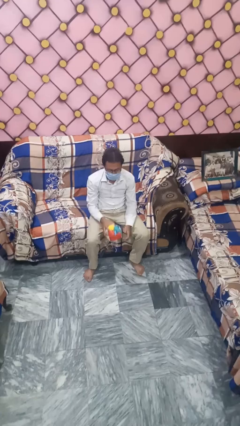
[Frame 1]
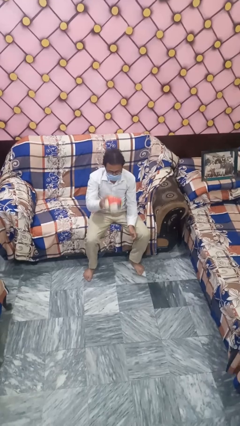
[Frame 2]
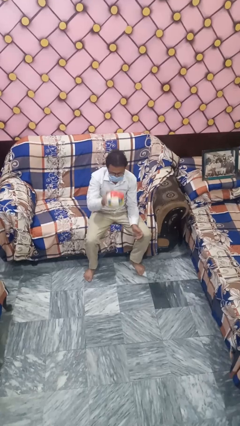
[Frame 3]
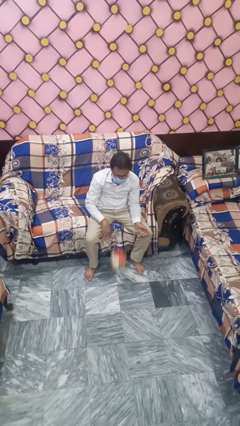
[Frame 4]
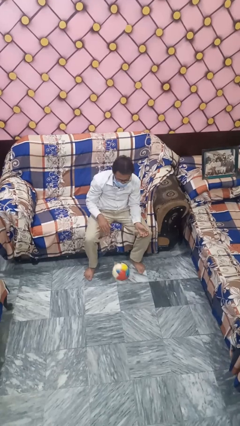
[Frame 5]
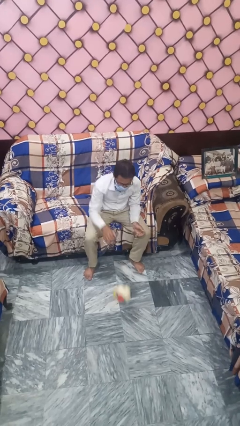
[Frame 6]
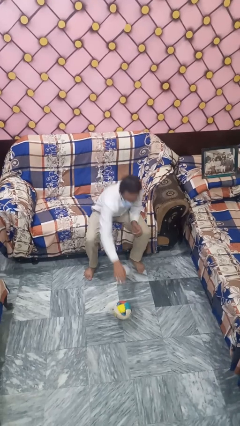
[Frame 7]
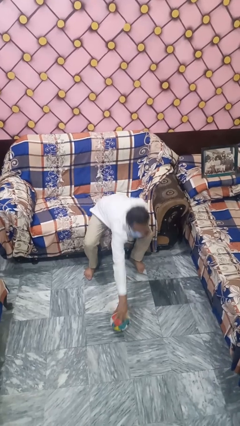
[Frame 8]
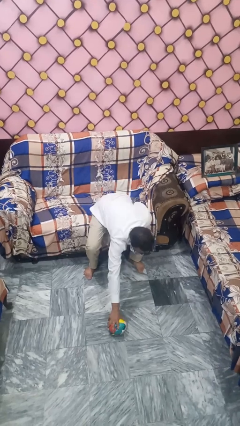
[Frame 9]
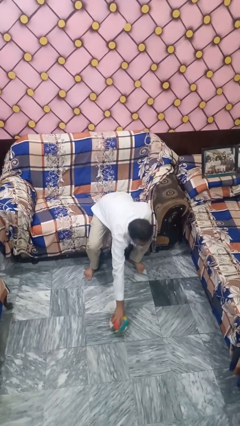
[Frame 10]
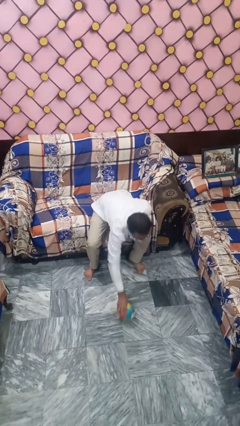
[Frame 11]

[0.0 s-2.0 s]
person bounces ball on floor

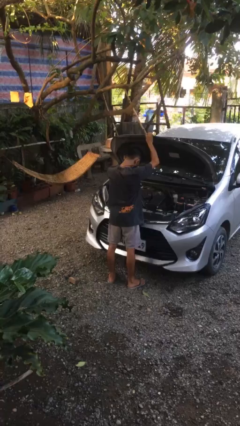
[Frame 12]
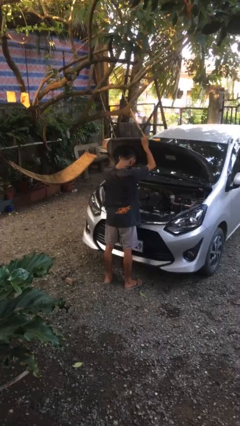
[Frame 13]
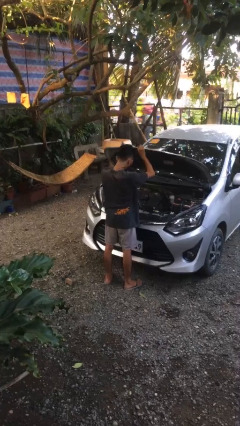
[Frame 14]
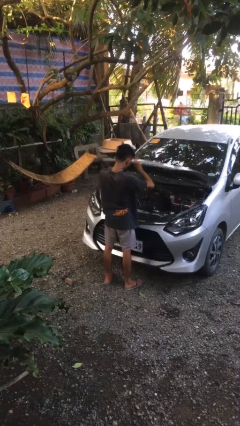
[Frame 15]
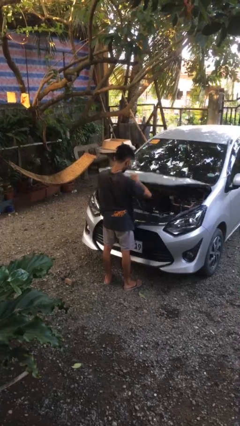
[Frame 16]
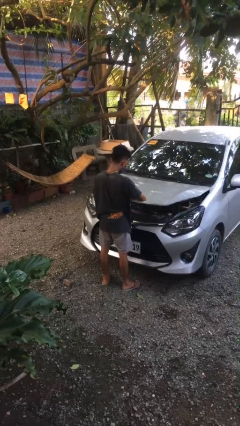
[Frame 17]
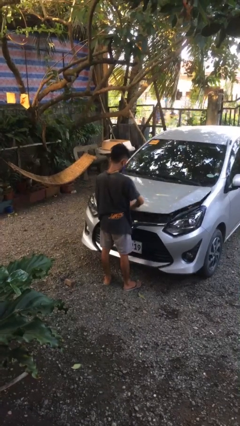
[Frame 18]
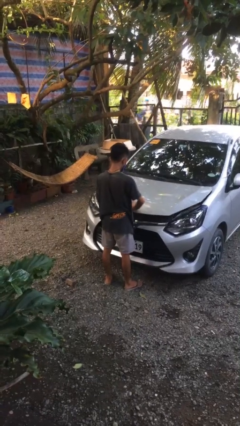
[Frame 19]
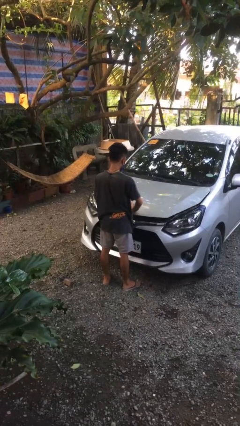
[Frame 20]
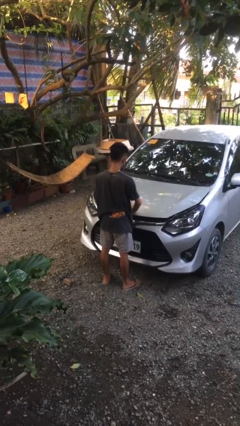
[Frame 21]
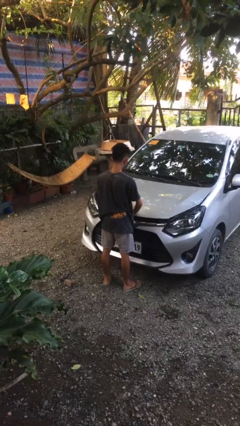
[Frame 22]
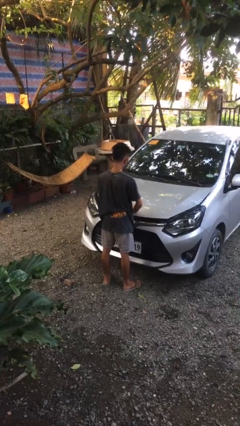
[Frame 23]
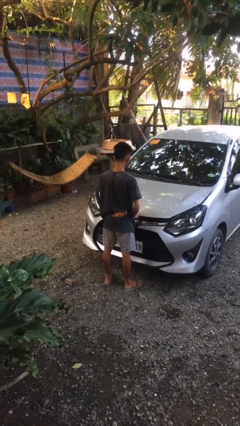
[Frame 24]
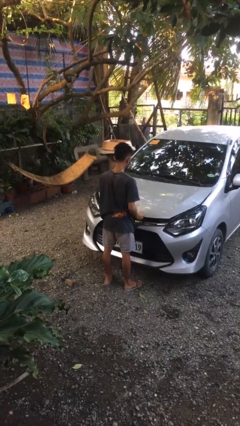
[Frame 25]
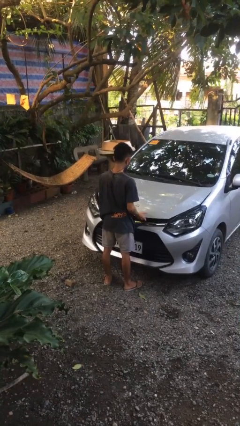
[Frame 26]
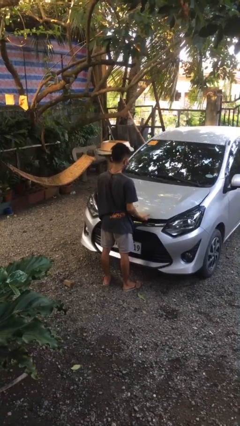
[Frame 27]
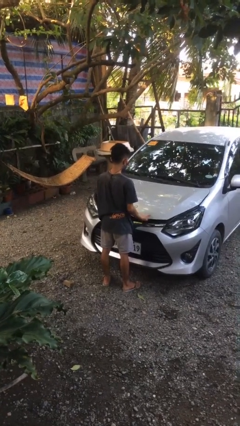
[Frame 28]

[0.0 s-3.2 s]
person closes car hood

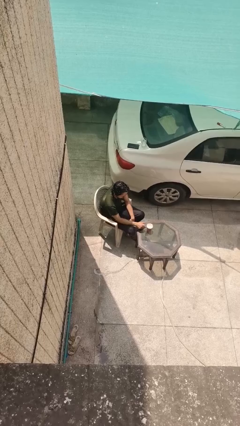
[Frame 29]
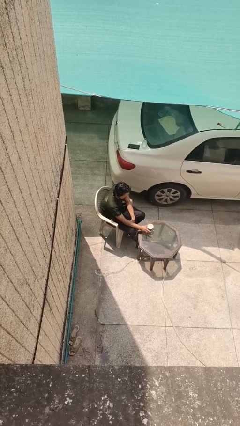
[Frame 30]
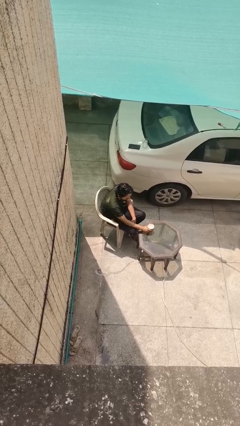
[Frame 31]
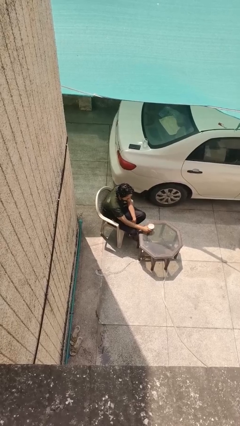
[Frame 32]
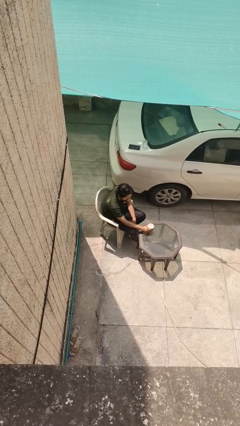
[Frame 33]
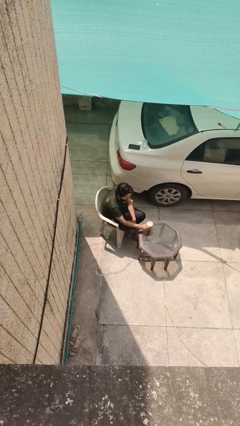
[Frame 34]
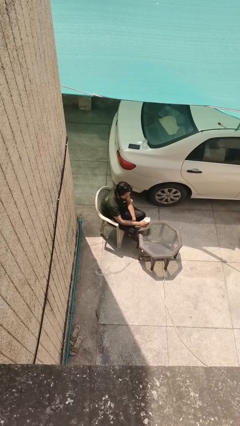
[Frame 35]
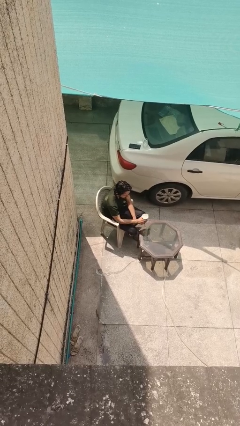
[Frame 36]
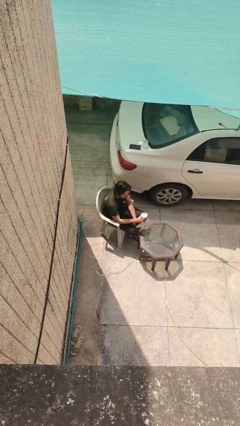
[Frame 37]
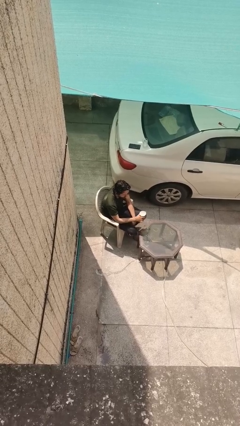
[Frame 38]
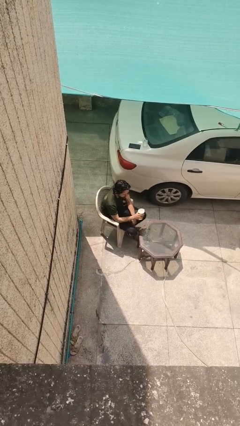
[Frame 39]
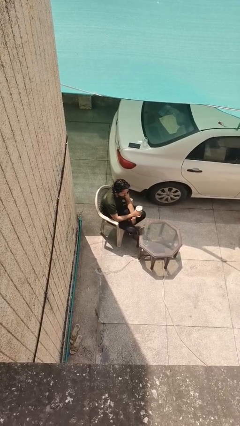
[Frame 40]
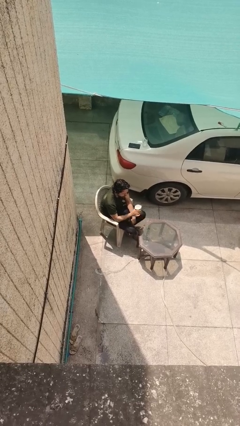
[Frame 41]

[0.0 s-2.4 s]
person picks up object from table

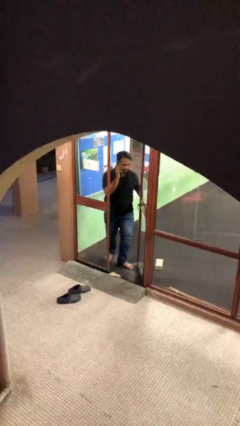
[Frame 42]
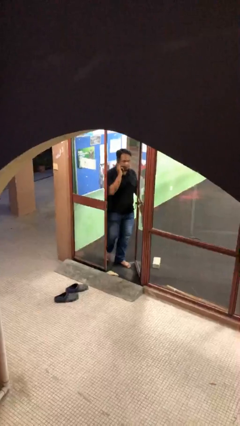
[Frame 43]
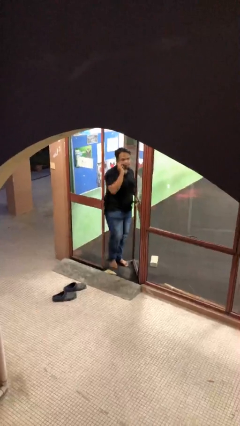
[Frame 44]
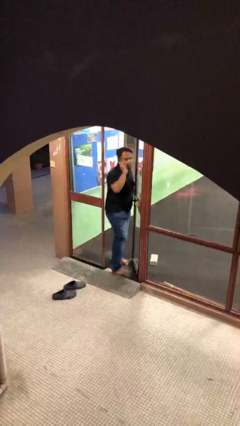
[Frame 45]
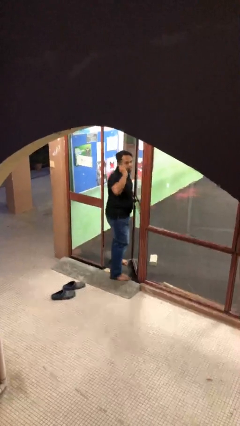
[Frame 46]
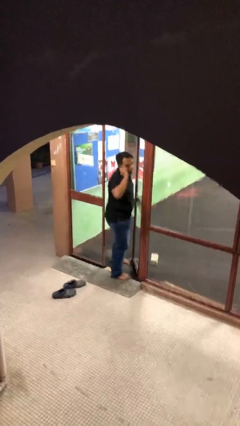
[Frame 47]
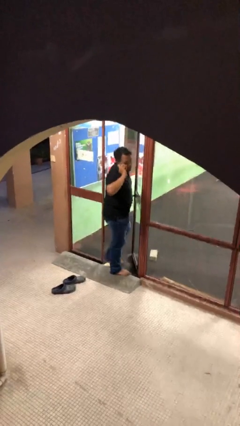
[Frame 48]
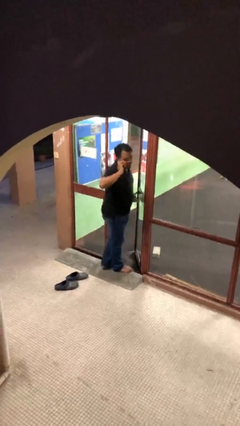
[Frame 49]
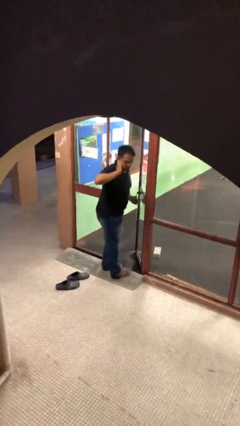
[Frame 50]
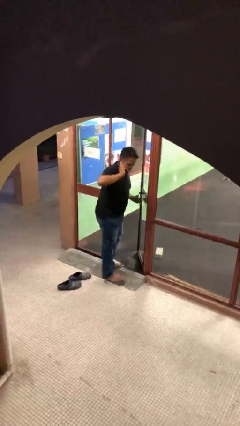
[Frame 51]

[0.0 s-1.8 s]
person enters scene through structure

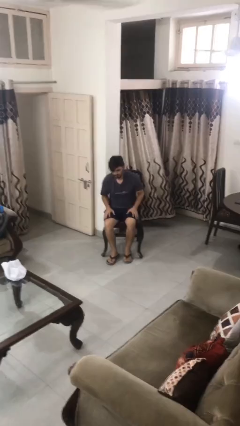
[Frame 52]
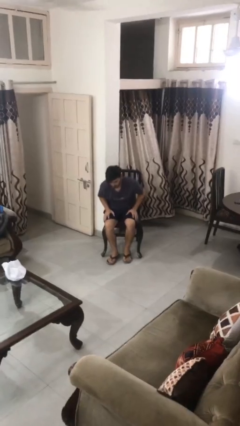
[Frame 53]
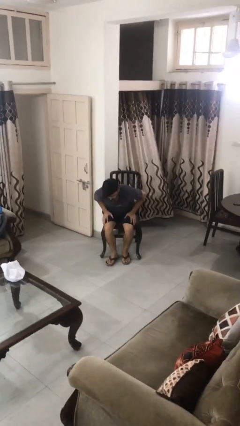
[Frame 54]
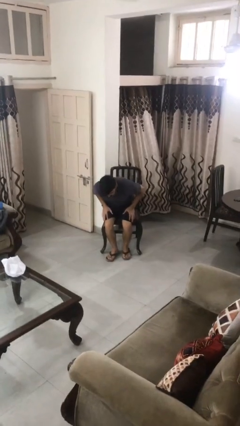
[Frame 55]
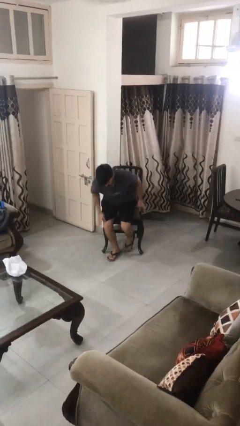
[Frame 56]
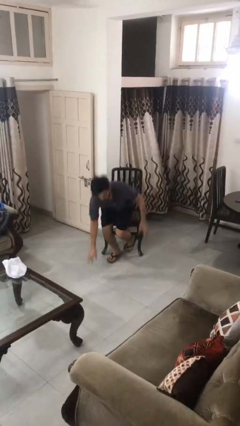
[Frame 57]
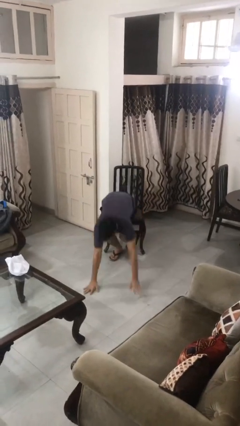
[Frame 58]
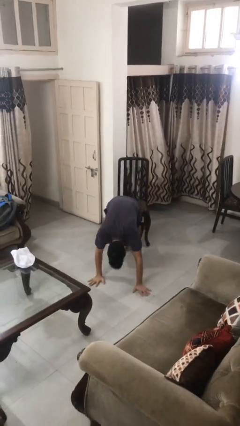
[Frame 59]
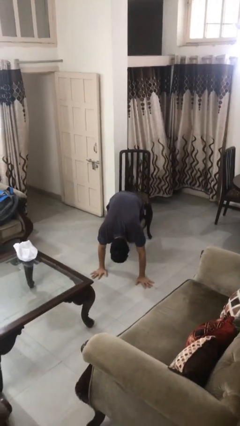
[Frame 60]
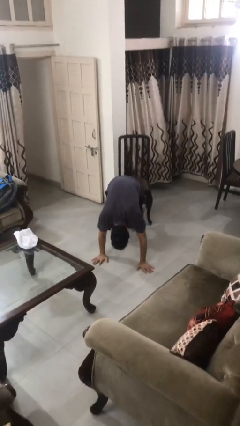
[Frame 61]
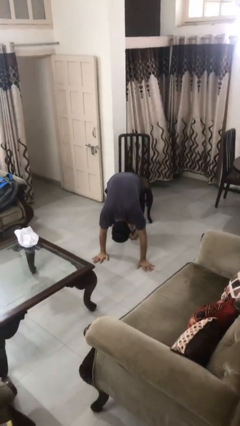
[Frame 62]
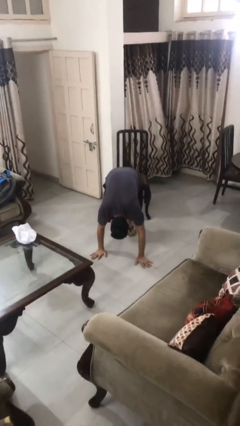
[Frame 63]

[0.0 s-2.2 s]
person falls from chair

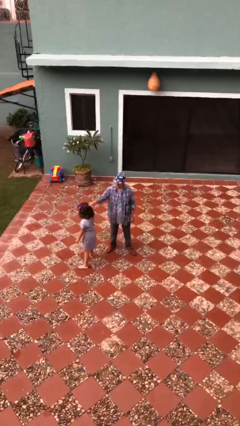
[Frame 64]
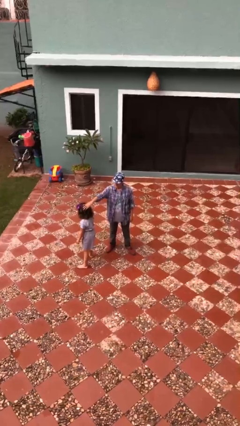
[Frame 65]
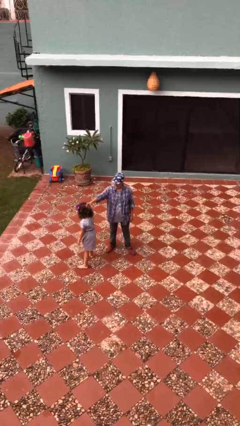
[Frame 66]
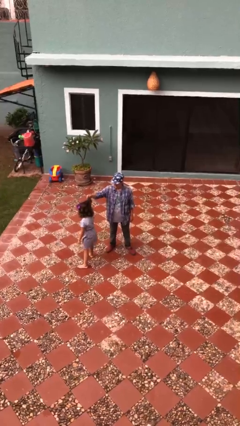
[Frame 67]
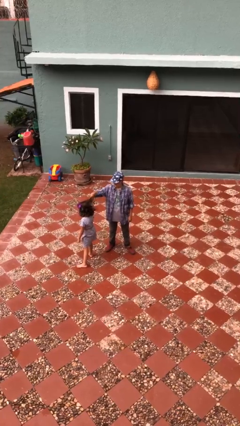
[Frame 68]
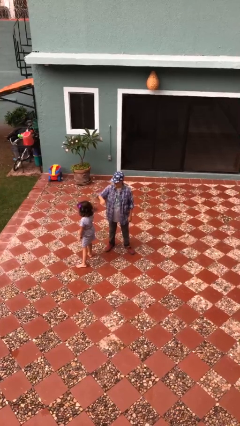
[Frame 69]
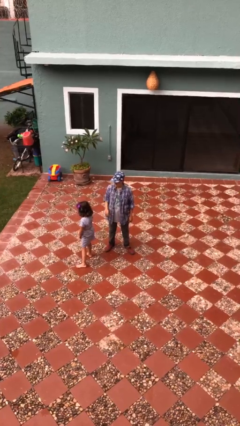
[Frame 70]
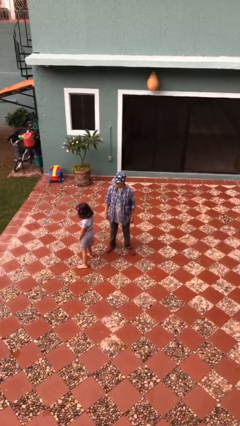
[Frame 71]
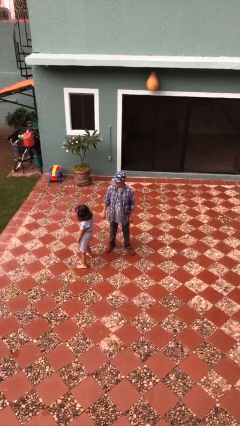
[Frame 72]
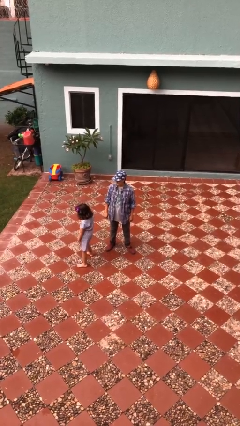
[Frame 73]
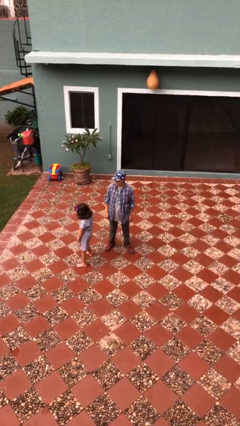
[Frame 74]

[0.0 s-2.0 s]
person grabs person by hair

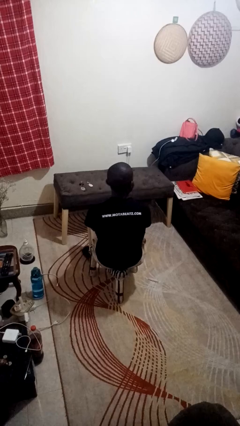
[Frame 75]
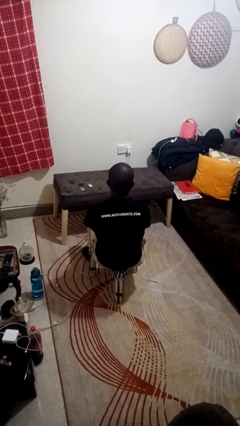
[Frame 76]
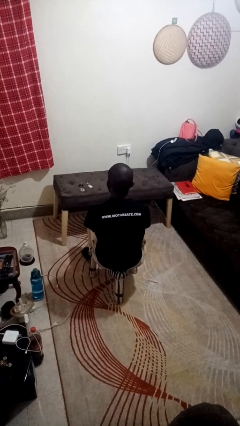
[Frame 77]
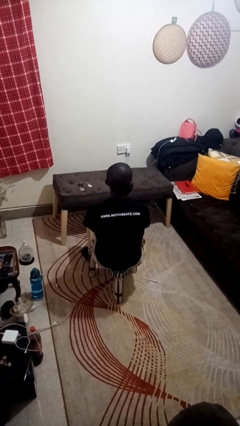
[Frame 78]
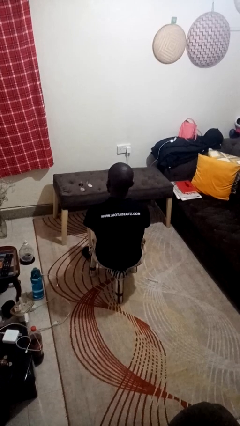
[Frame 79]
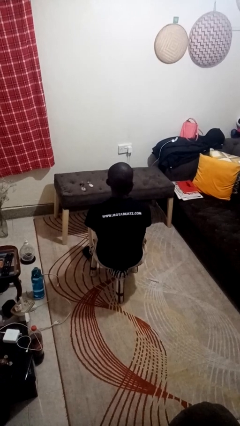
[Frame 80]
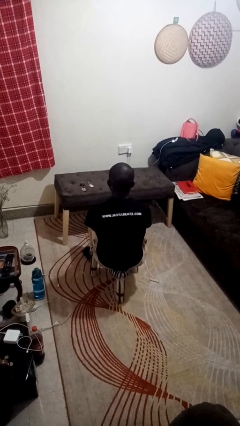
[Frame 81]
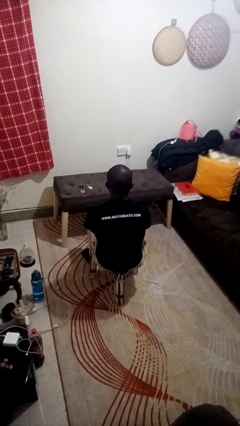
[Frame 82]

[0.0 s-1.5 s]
person shakes head

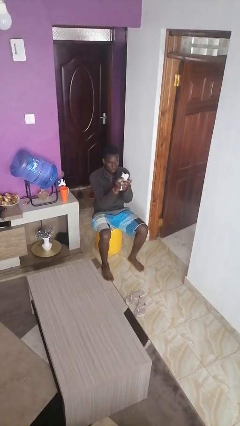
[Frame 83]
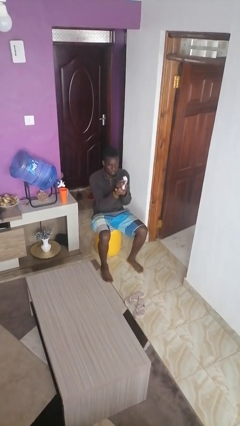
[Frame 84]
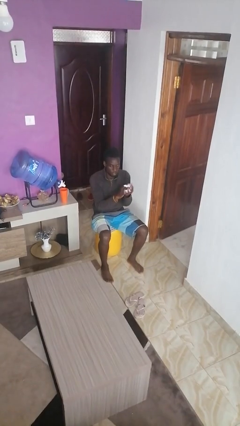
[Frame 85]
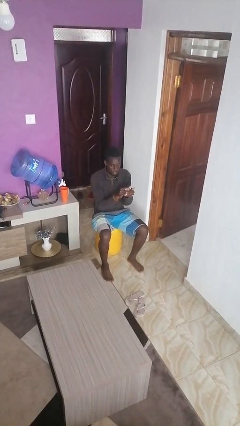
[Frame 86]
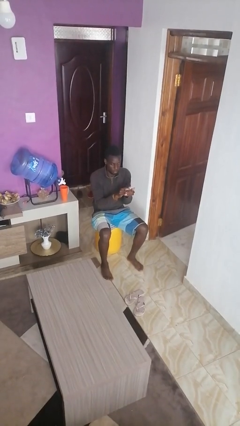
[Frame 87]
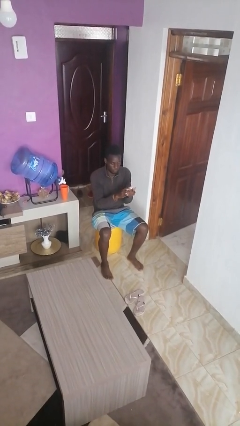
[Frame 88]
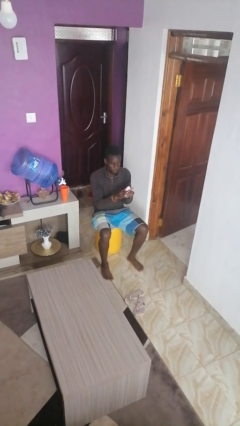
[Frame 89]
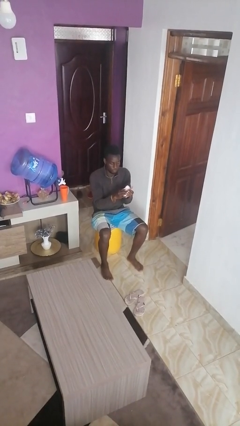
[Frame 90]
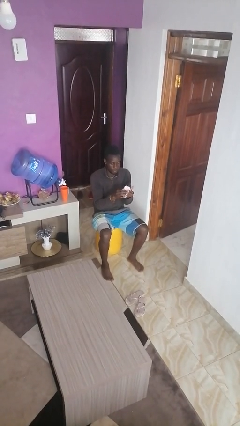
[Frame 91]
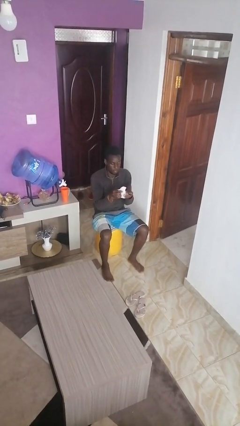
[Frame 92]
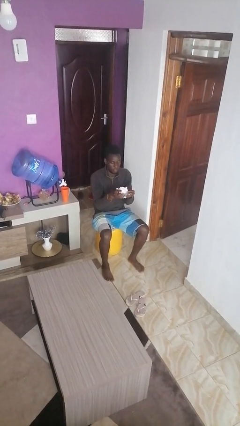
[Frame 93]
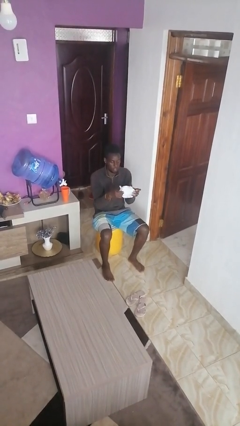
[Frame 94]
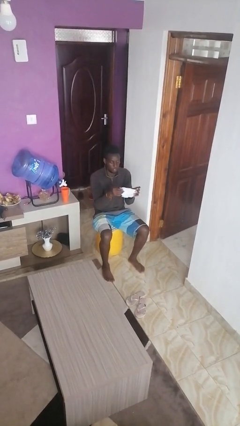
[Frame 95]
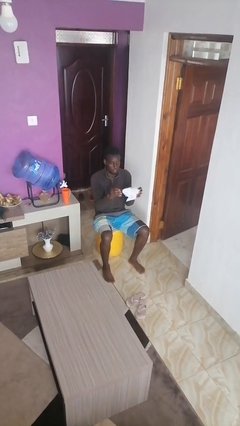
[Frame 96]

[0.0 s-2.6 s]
person crumples paper
